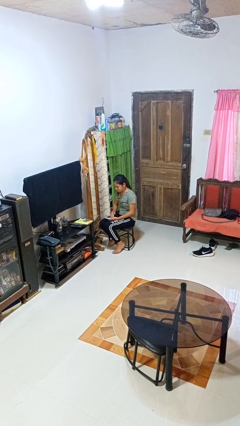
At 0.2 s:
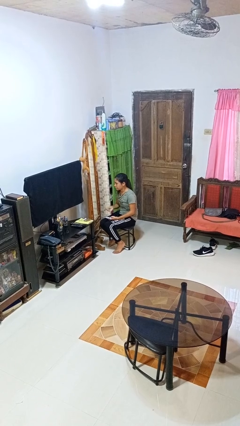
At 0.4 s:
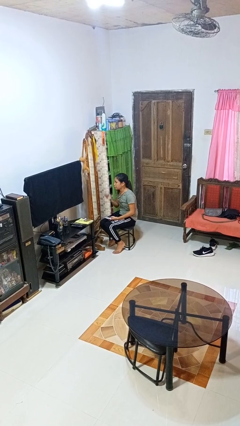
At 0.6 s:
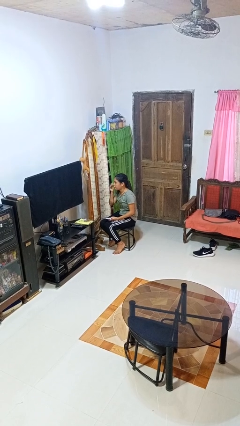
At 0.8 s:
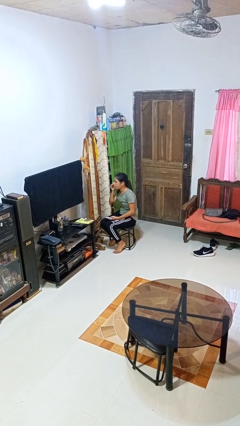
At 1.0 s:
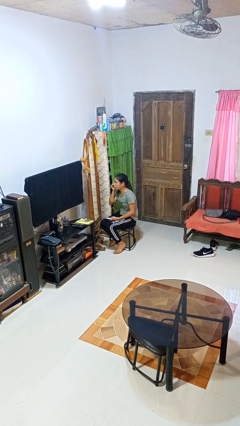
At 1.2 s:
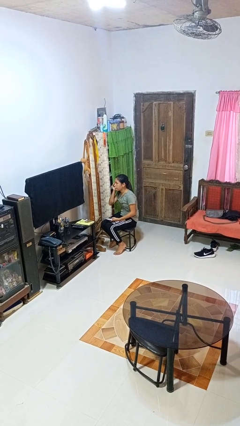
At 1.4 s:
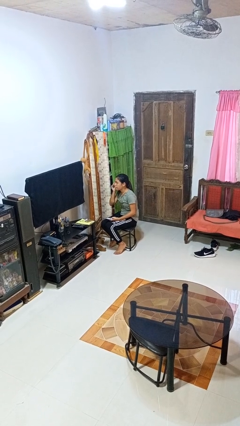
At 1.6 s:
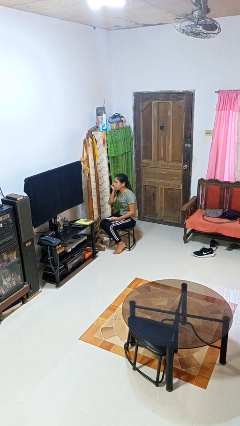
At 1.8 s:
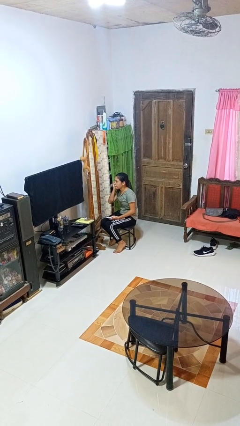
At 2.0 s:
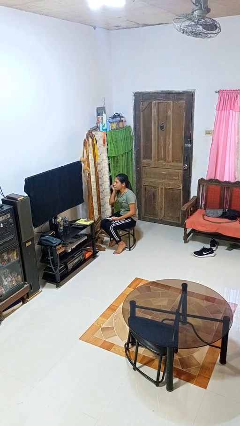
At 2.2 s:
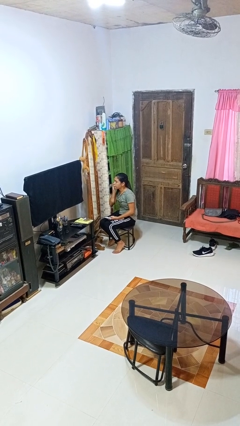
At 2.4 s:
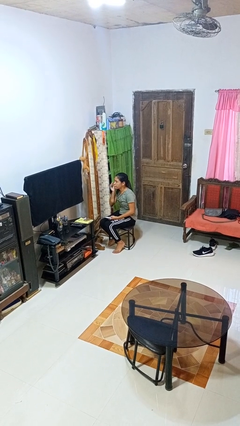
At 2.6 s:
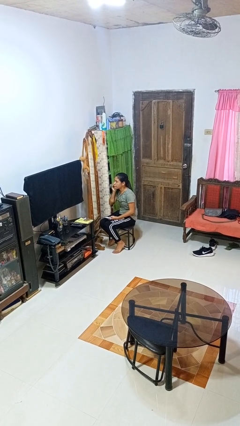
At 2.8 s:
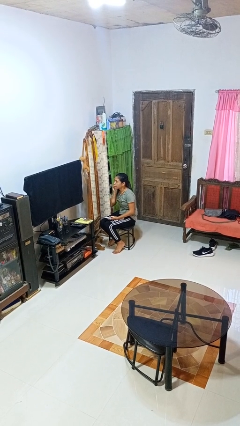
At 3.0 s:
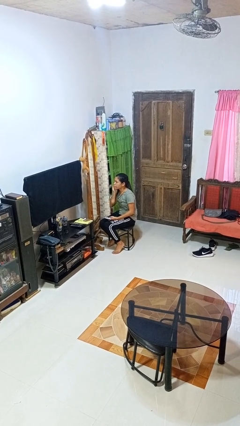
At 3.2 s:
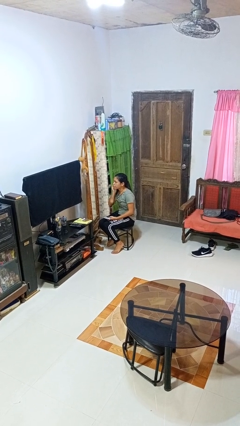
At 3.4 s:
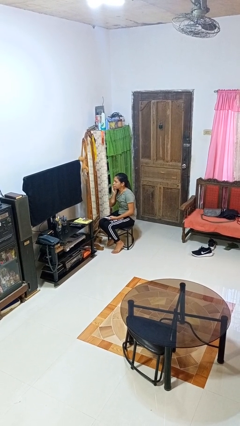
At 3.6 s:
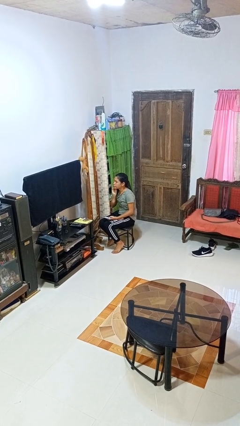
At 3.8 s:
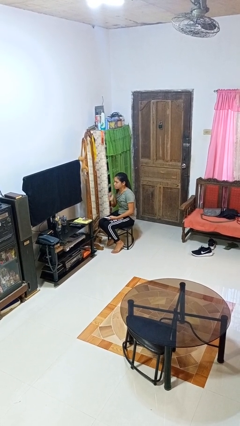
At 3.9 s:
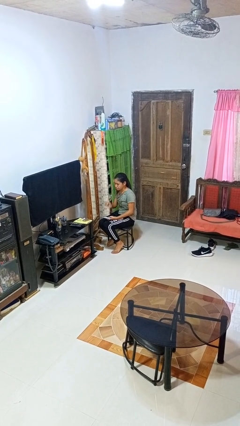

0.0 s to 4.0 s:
person applies foundation makeup

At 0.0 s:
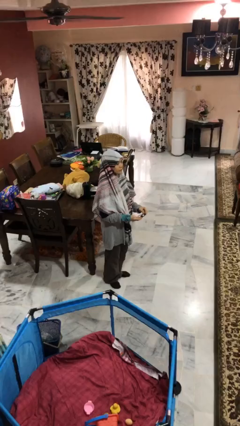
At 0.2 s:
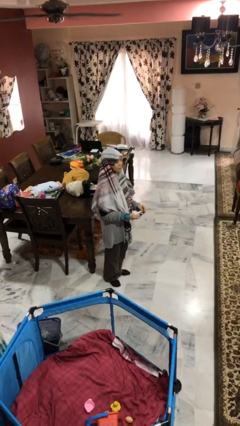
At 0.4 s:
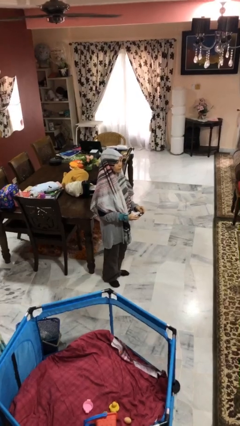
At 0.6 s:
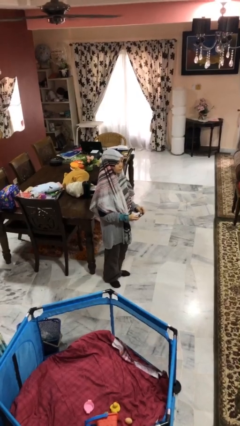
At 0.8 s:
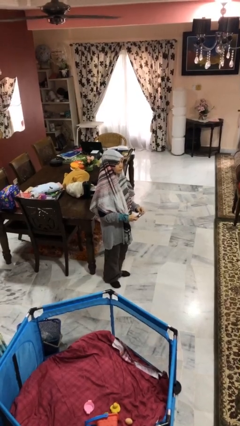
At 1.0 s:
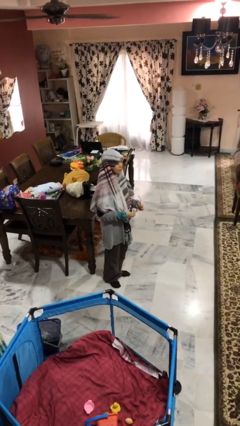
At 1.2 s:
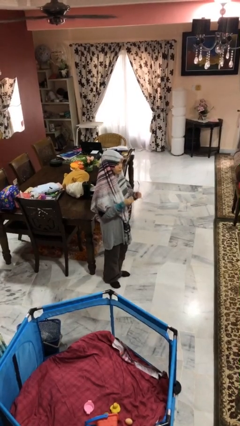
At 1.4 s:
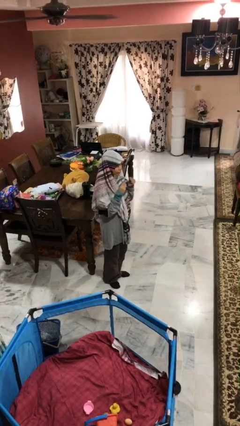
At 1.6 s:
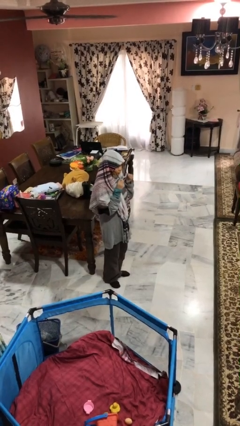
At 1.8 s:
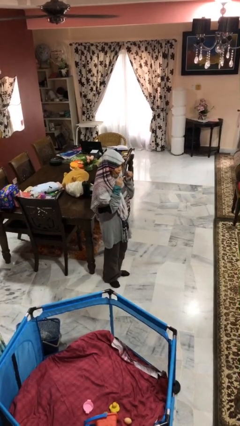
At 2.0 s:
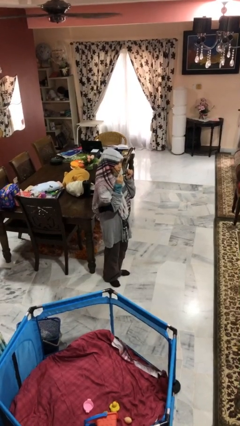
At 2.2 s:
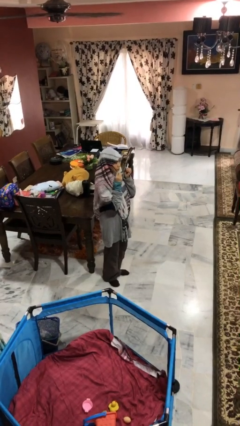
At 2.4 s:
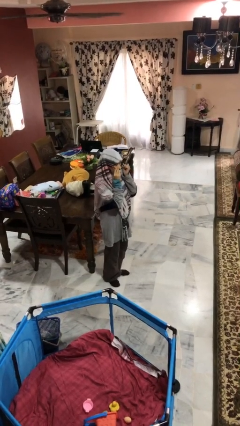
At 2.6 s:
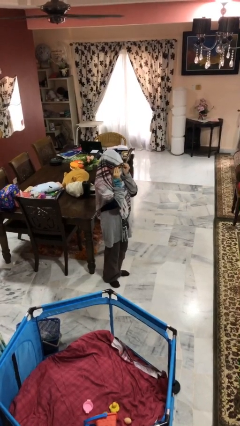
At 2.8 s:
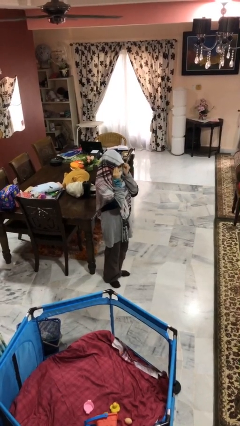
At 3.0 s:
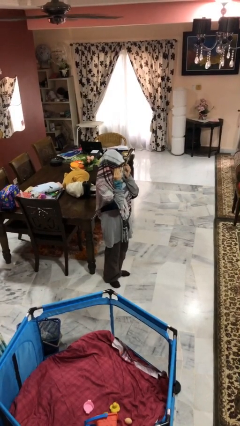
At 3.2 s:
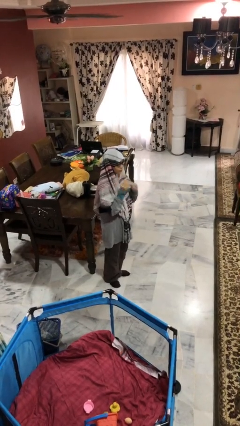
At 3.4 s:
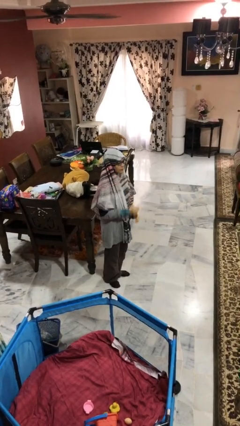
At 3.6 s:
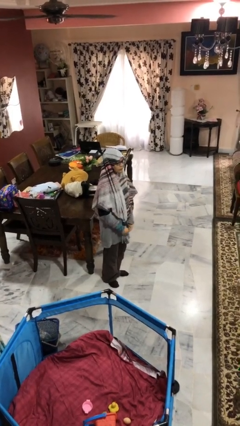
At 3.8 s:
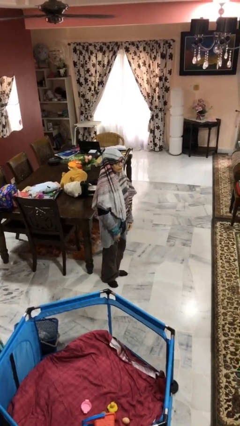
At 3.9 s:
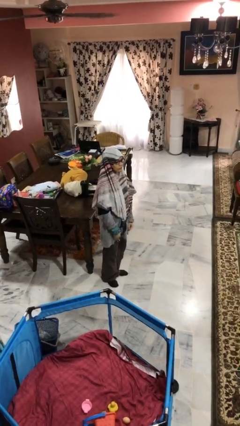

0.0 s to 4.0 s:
person puts on glasses

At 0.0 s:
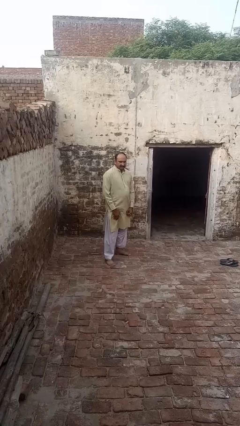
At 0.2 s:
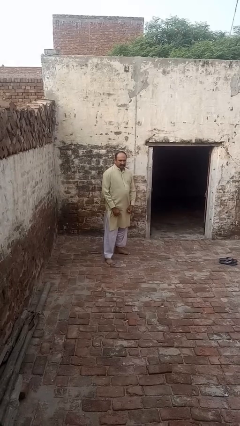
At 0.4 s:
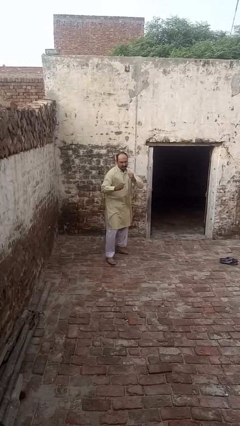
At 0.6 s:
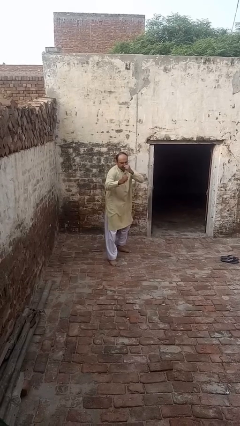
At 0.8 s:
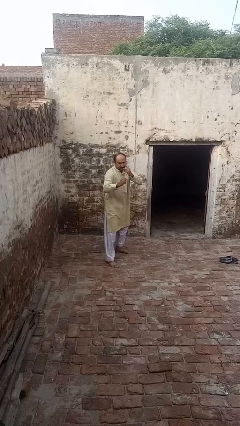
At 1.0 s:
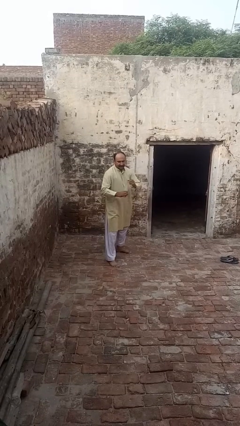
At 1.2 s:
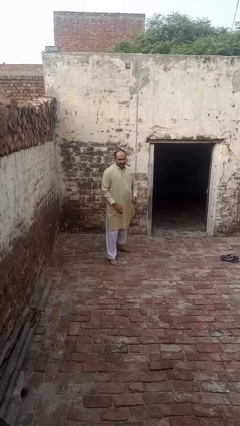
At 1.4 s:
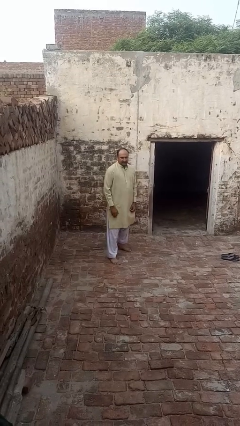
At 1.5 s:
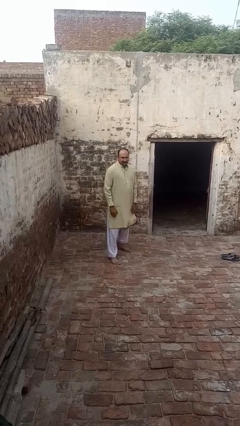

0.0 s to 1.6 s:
person karate chop

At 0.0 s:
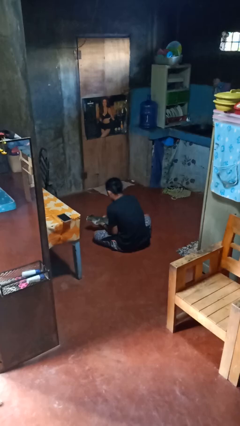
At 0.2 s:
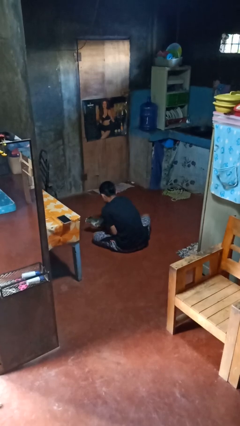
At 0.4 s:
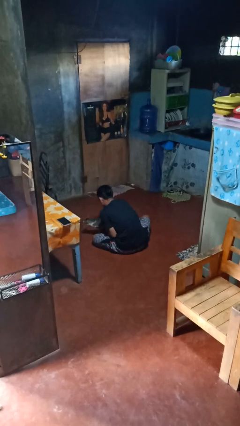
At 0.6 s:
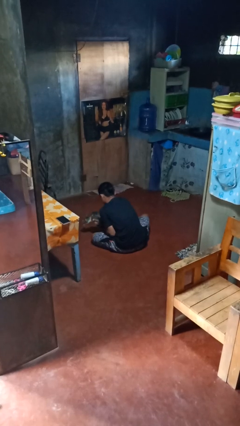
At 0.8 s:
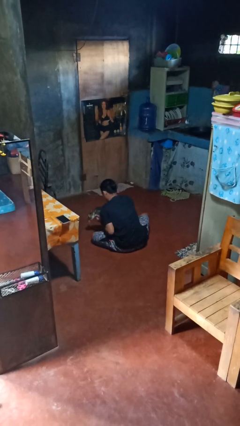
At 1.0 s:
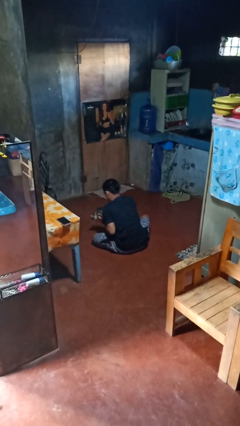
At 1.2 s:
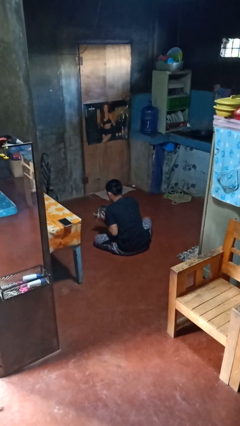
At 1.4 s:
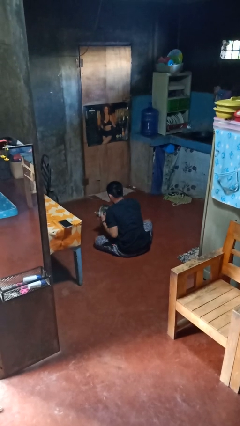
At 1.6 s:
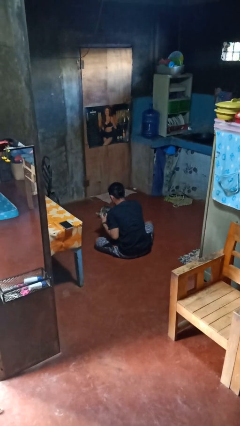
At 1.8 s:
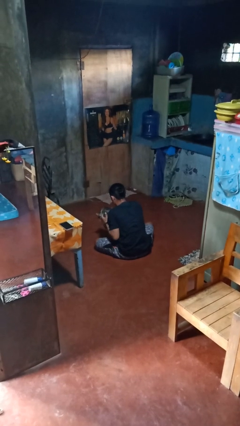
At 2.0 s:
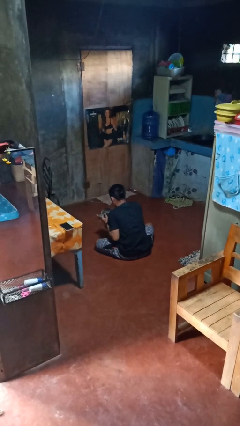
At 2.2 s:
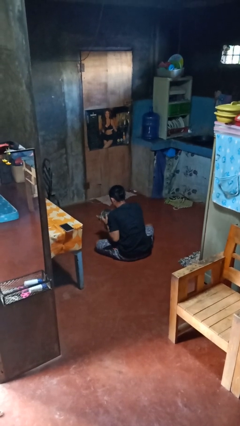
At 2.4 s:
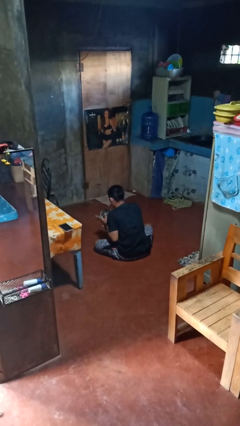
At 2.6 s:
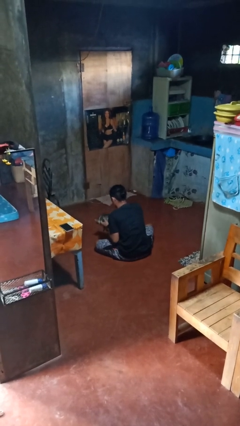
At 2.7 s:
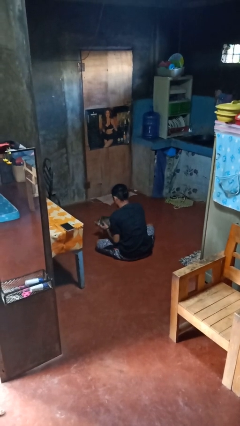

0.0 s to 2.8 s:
person hugs cat

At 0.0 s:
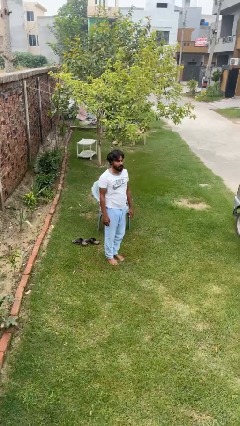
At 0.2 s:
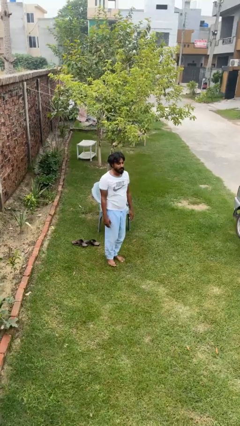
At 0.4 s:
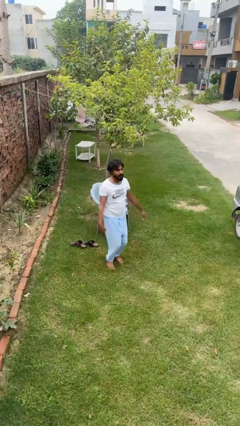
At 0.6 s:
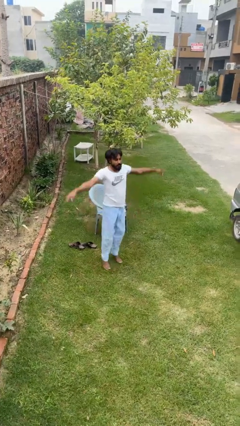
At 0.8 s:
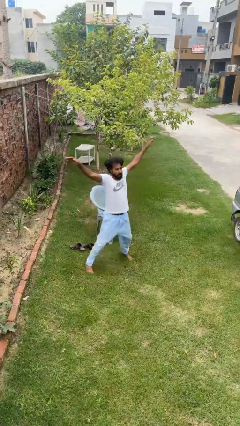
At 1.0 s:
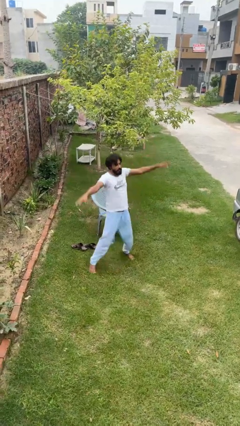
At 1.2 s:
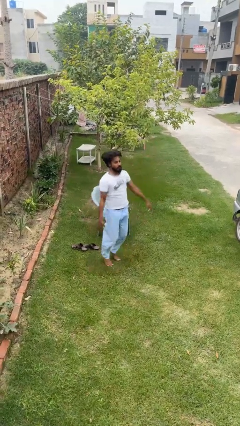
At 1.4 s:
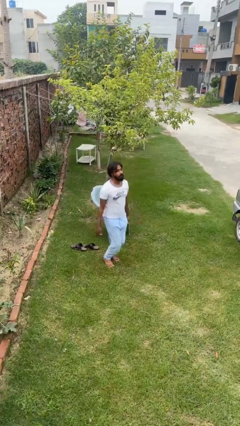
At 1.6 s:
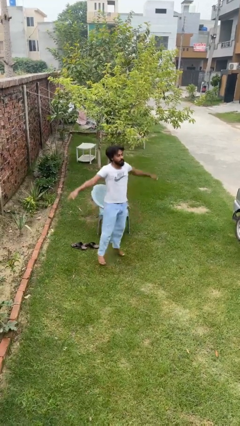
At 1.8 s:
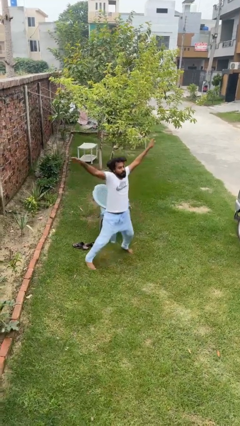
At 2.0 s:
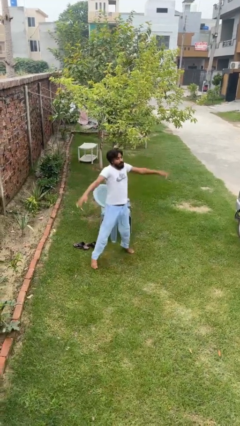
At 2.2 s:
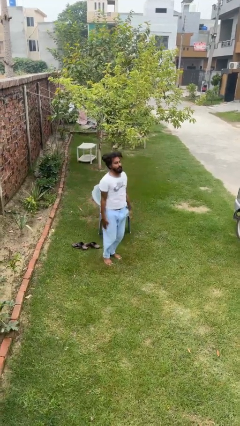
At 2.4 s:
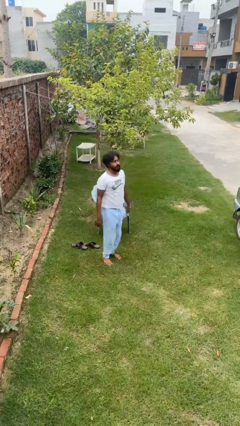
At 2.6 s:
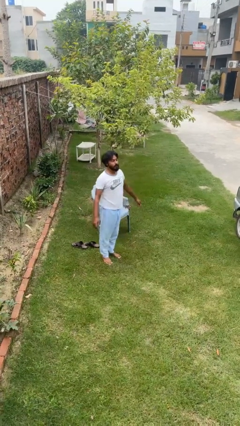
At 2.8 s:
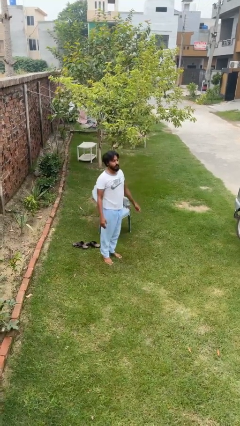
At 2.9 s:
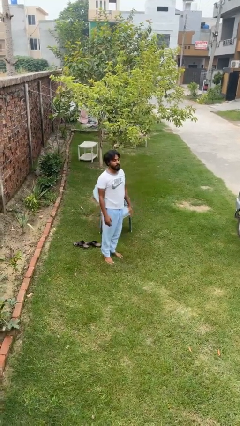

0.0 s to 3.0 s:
person exercises with jumping jacks

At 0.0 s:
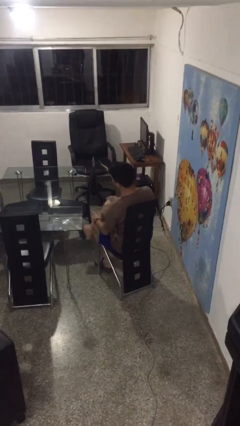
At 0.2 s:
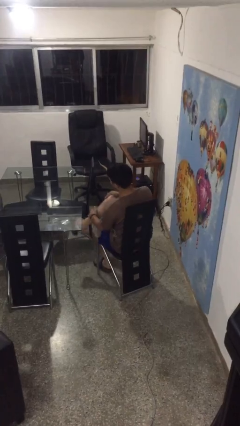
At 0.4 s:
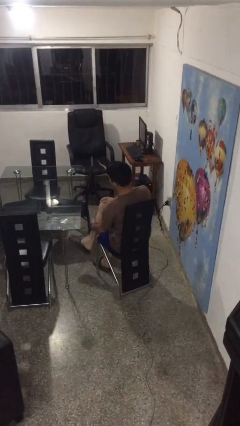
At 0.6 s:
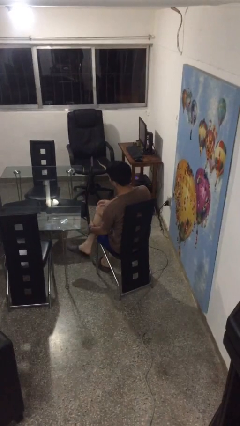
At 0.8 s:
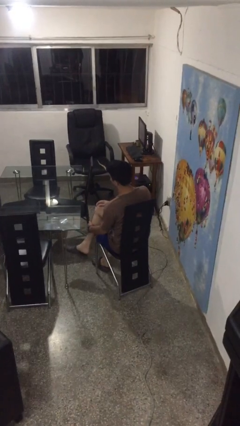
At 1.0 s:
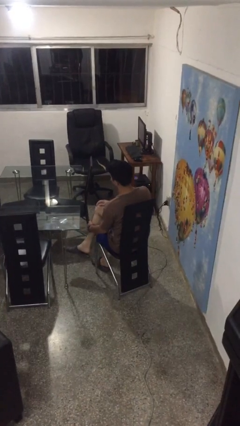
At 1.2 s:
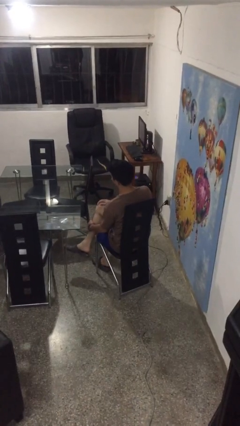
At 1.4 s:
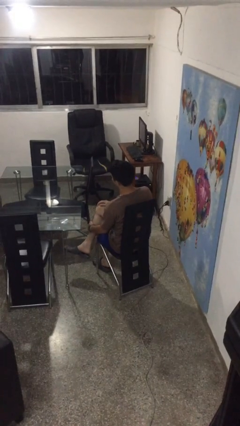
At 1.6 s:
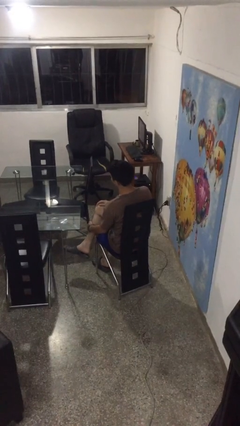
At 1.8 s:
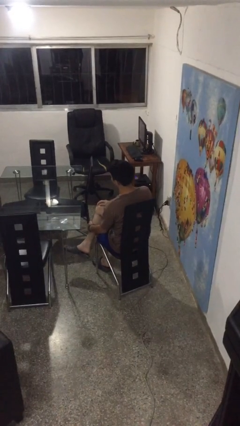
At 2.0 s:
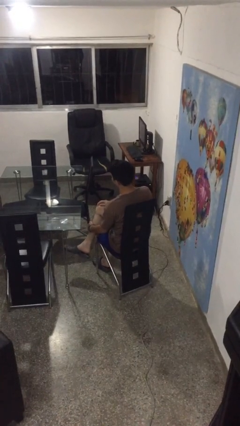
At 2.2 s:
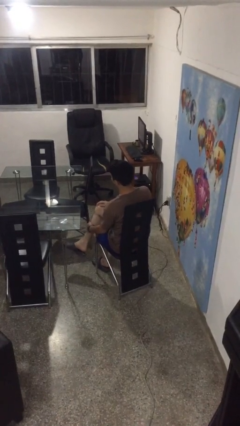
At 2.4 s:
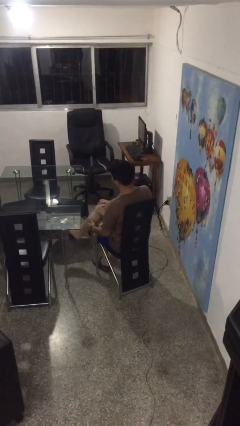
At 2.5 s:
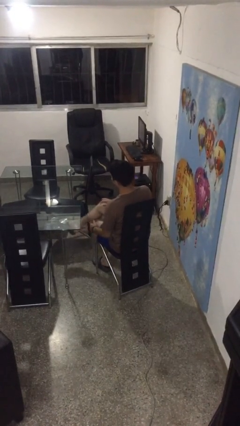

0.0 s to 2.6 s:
person crosses legs
